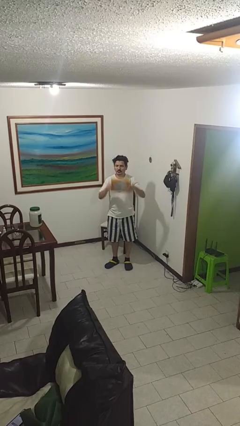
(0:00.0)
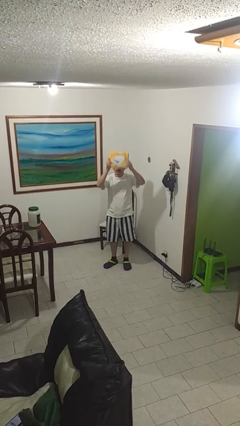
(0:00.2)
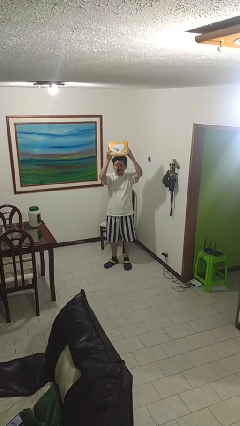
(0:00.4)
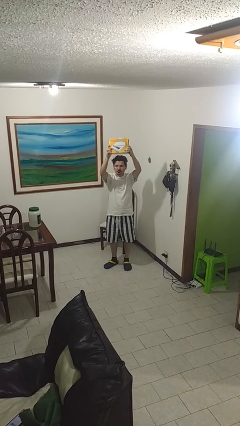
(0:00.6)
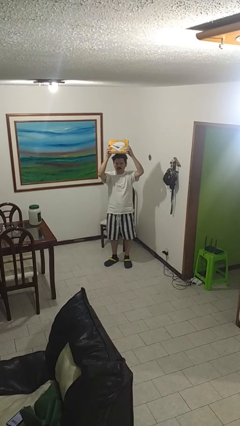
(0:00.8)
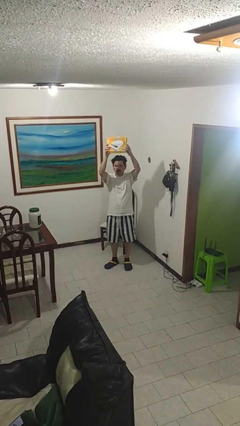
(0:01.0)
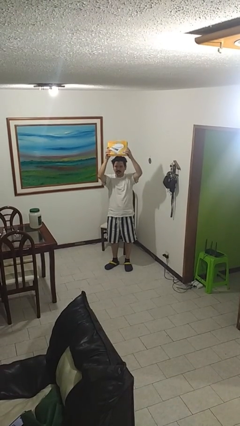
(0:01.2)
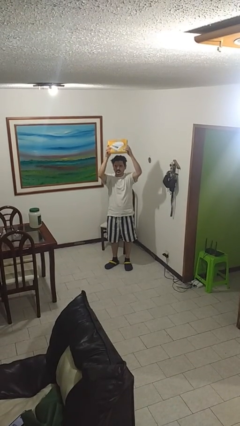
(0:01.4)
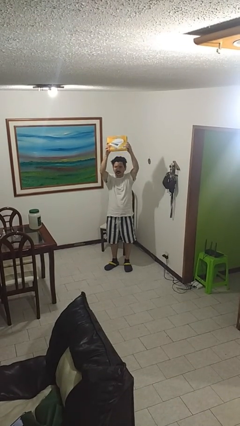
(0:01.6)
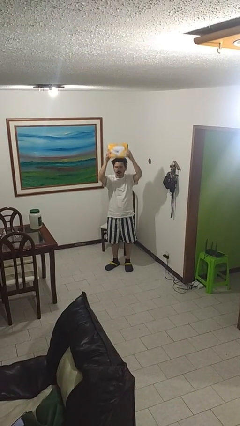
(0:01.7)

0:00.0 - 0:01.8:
person holds object above head

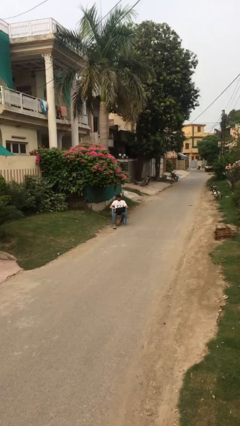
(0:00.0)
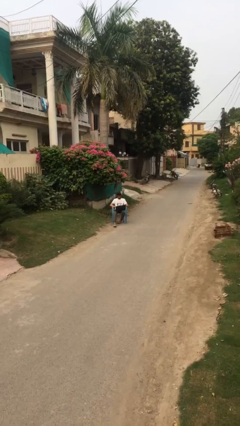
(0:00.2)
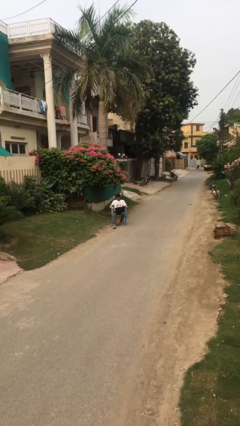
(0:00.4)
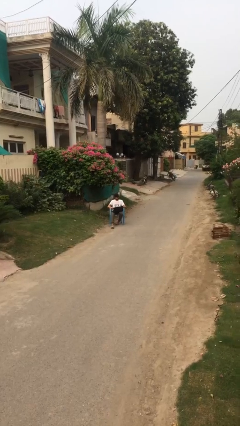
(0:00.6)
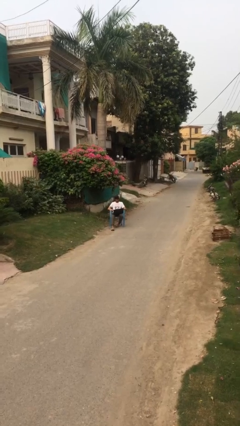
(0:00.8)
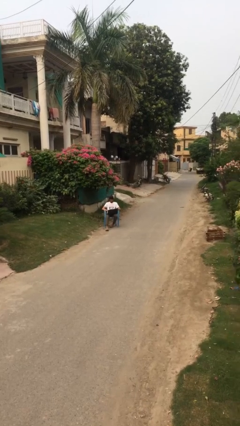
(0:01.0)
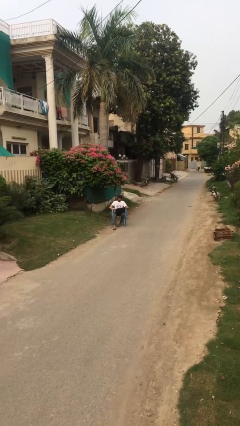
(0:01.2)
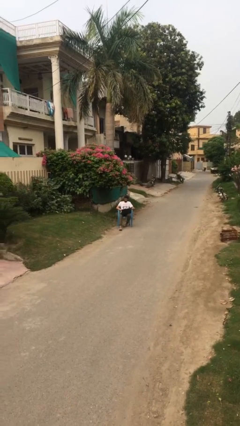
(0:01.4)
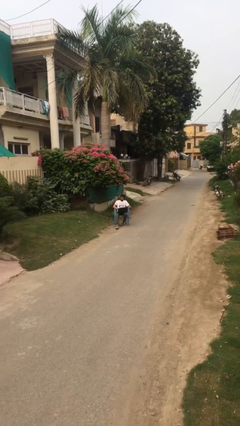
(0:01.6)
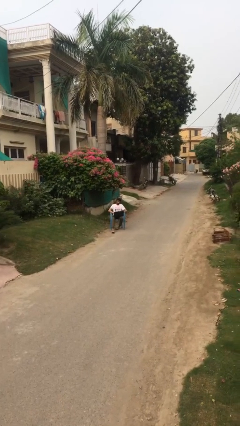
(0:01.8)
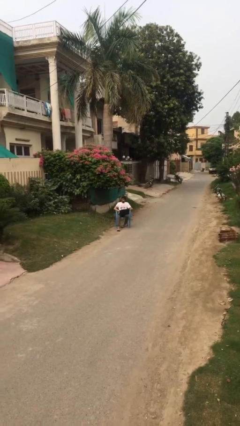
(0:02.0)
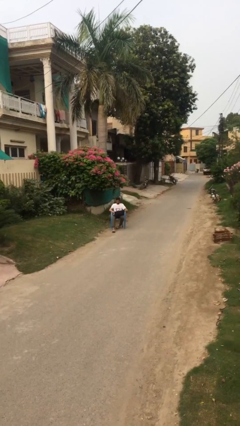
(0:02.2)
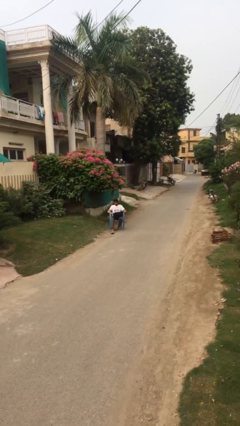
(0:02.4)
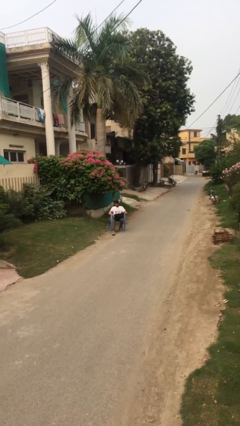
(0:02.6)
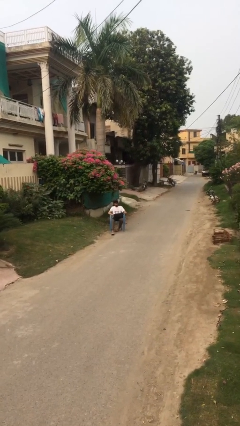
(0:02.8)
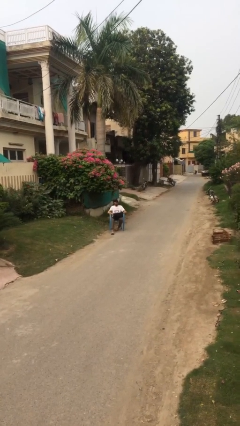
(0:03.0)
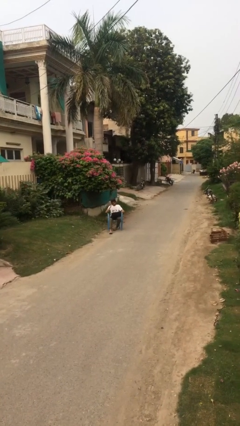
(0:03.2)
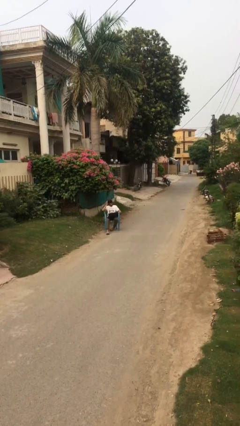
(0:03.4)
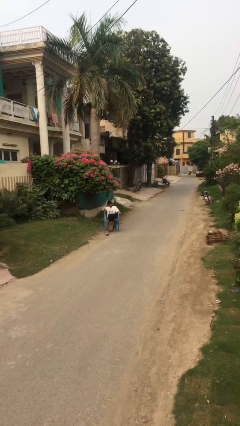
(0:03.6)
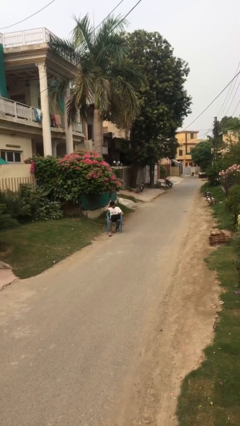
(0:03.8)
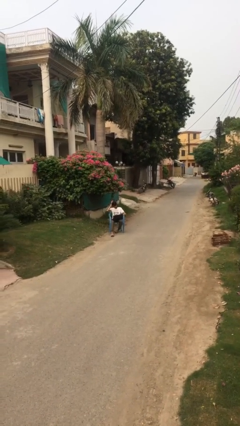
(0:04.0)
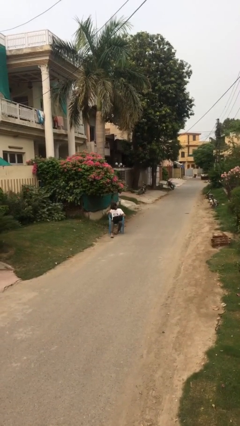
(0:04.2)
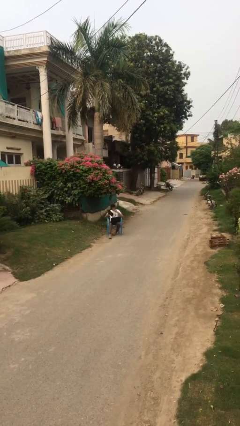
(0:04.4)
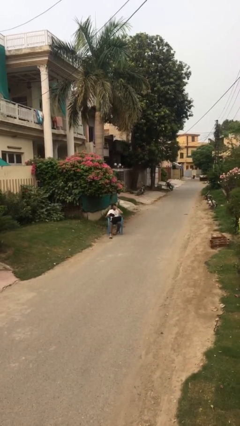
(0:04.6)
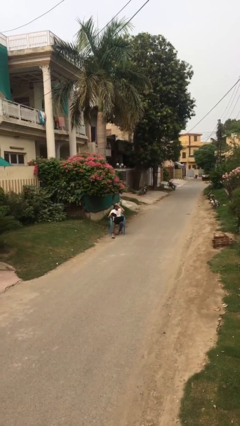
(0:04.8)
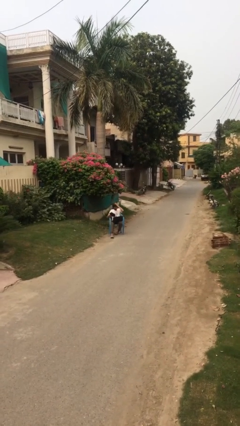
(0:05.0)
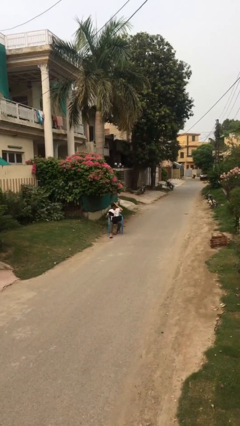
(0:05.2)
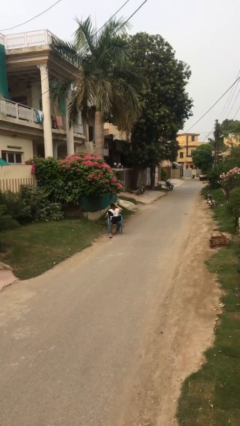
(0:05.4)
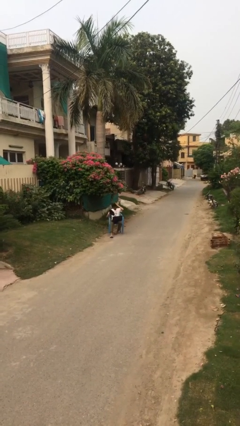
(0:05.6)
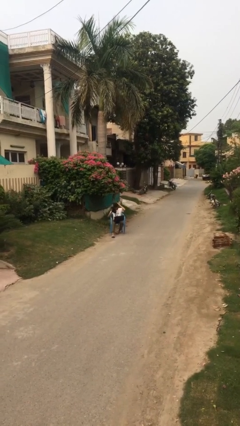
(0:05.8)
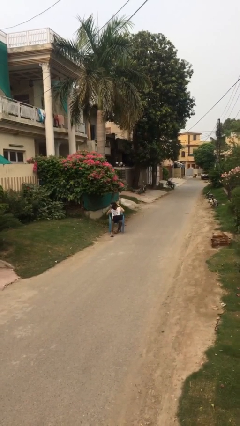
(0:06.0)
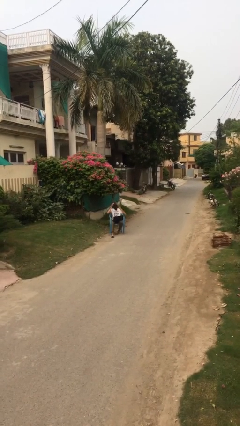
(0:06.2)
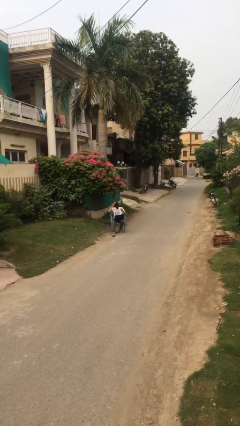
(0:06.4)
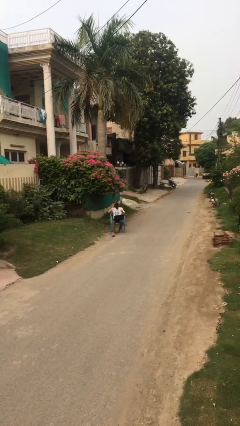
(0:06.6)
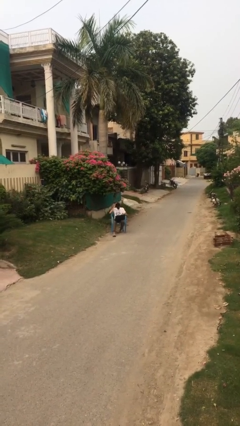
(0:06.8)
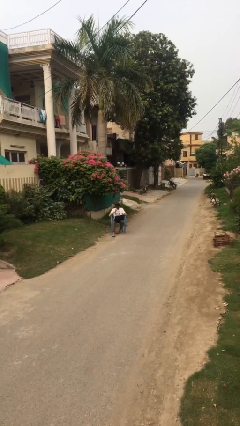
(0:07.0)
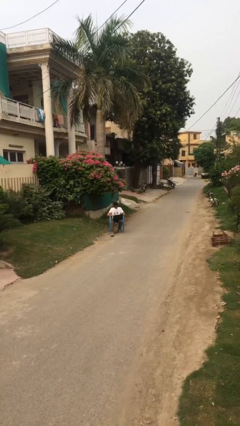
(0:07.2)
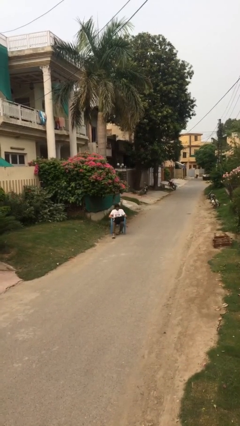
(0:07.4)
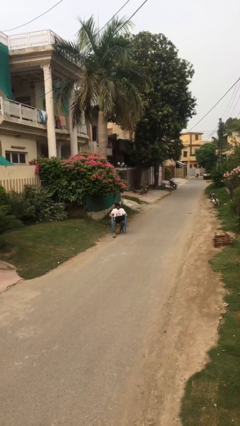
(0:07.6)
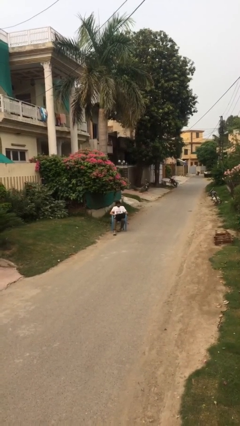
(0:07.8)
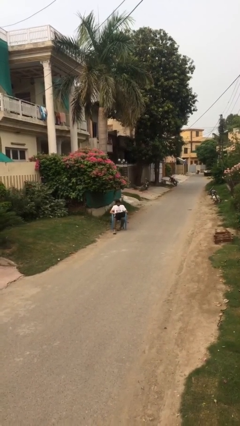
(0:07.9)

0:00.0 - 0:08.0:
person interacts with laptop

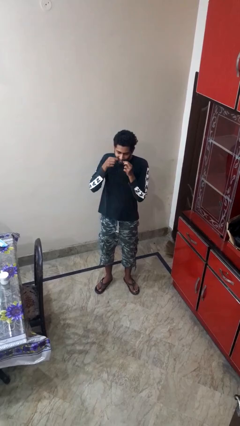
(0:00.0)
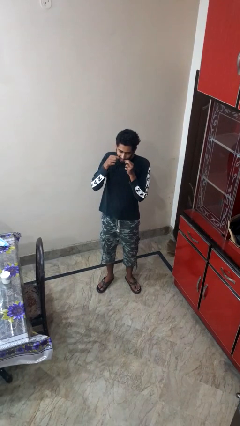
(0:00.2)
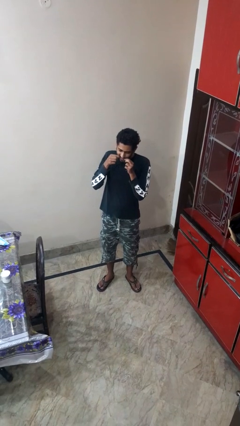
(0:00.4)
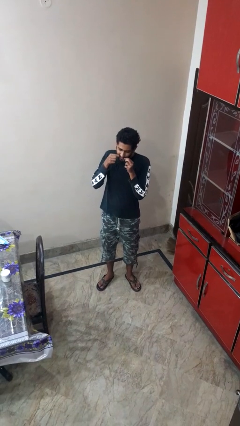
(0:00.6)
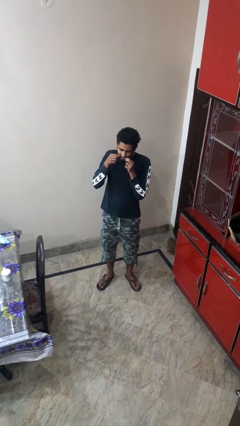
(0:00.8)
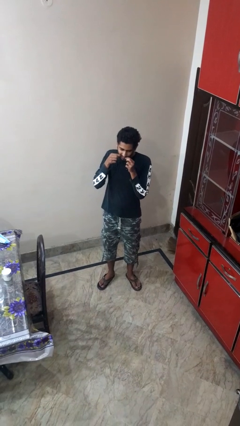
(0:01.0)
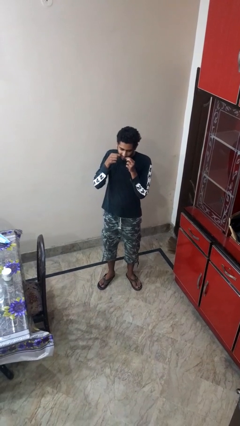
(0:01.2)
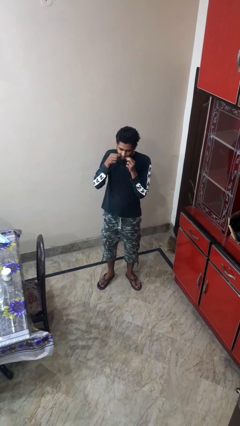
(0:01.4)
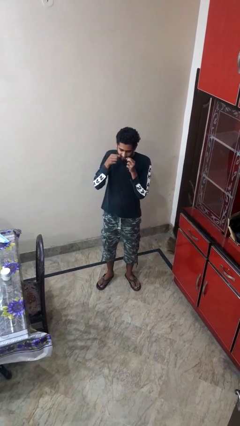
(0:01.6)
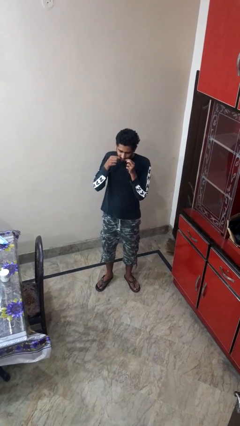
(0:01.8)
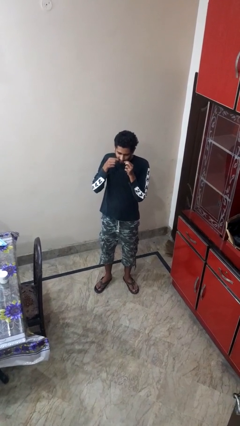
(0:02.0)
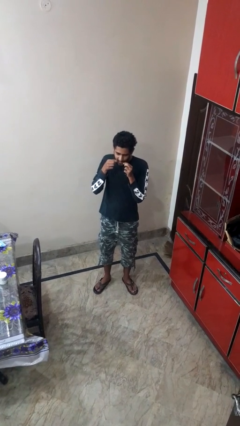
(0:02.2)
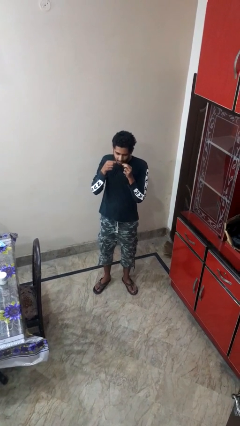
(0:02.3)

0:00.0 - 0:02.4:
person flosses

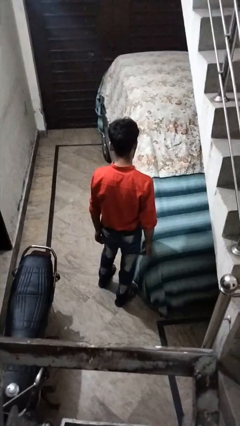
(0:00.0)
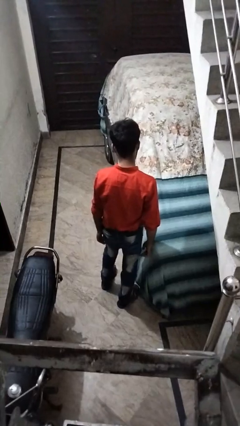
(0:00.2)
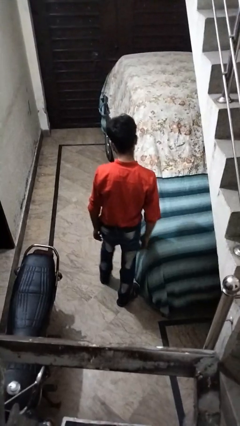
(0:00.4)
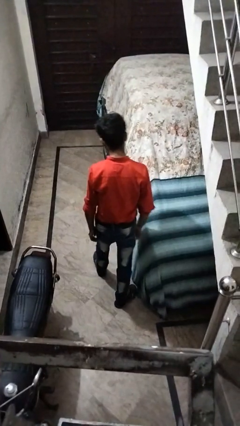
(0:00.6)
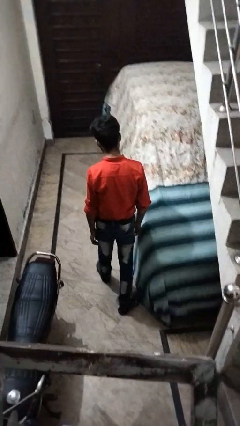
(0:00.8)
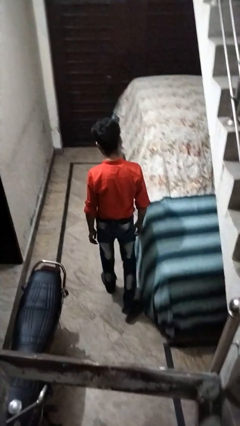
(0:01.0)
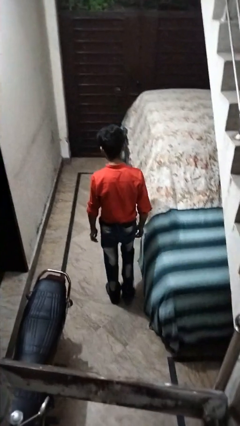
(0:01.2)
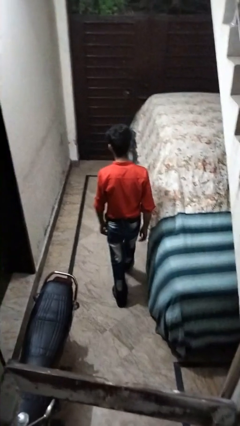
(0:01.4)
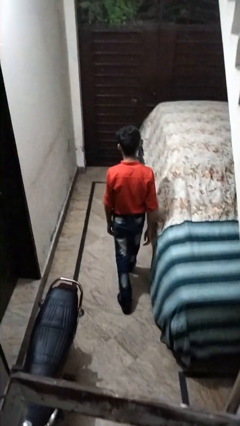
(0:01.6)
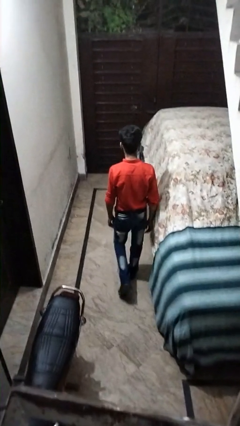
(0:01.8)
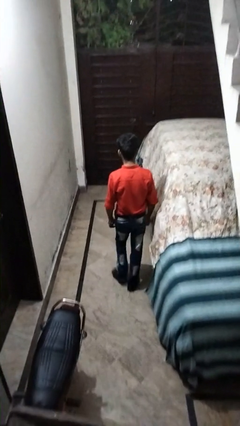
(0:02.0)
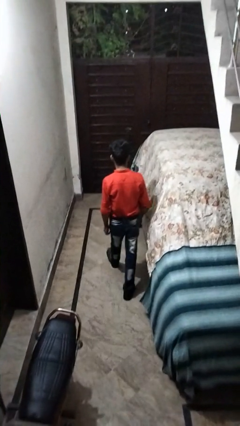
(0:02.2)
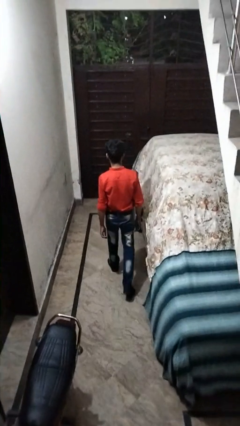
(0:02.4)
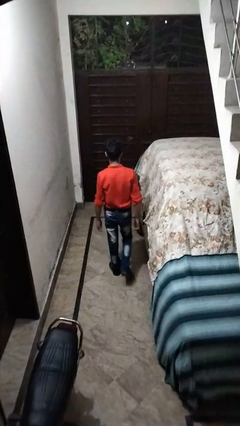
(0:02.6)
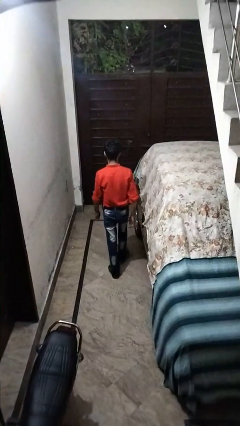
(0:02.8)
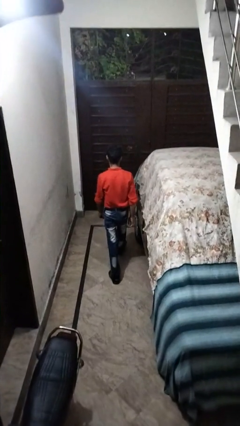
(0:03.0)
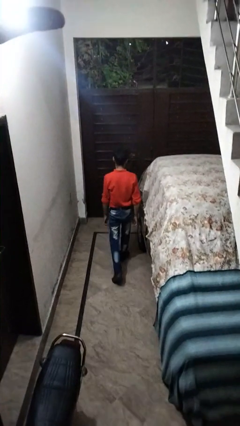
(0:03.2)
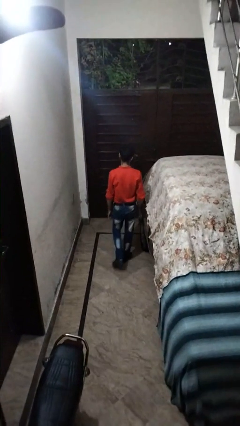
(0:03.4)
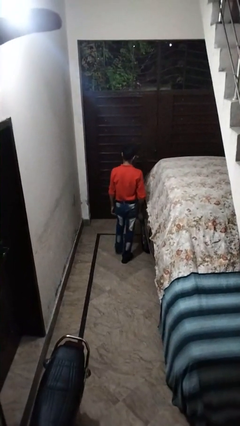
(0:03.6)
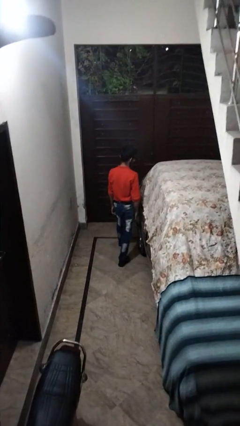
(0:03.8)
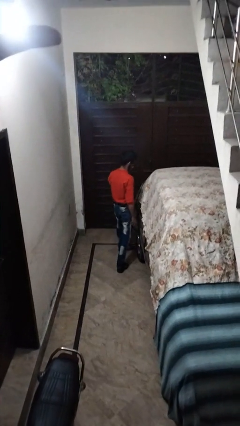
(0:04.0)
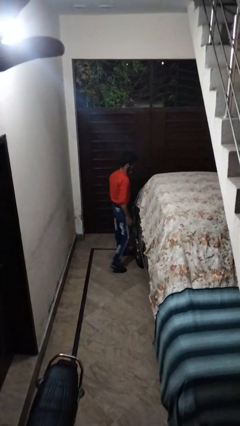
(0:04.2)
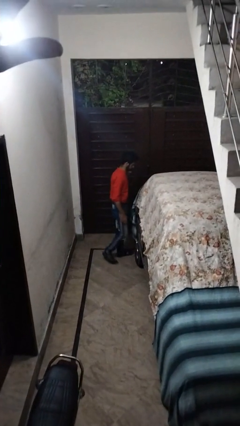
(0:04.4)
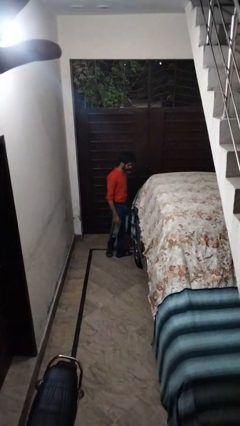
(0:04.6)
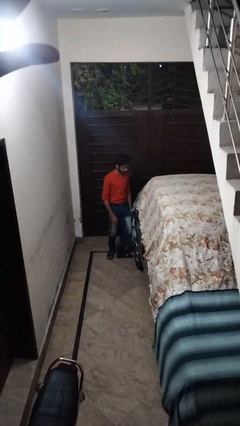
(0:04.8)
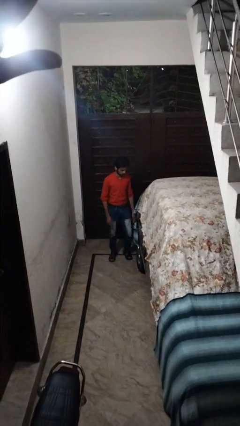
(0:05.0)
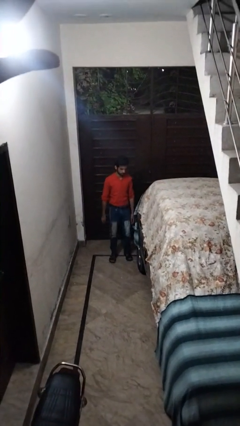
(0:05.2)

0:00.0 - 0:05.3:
person walks around car

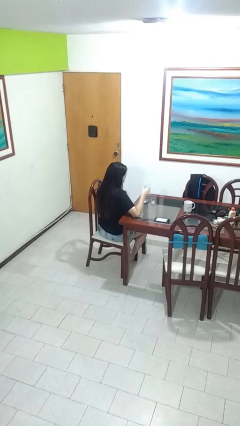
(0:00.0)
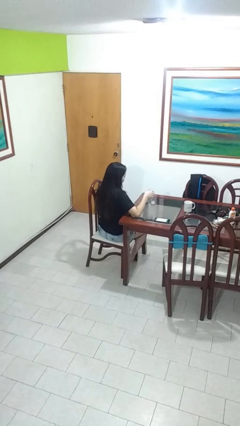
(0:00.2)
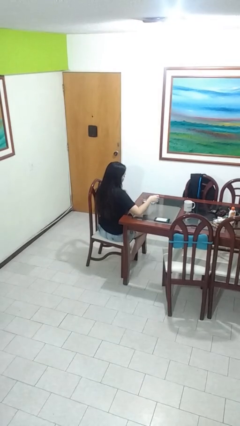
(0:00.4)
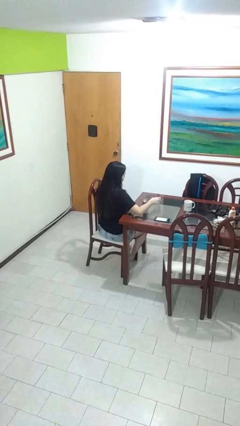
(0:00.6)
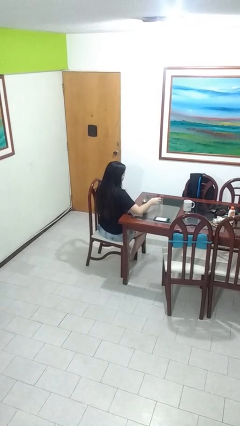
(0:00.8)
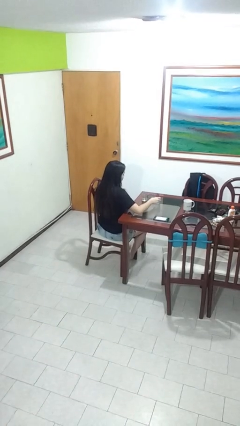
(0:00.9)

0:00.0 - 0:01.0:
person puts down object on table
